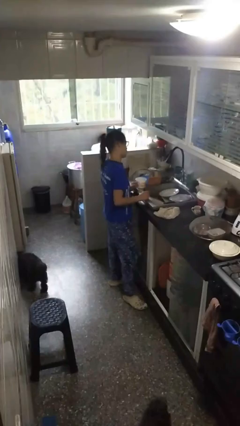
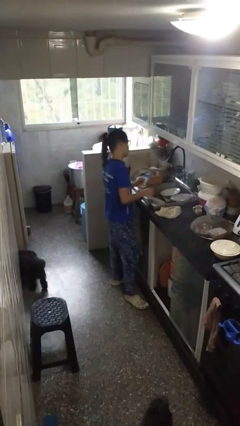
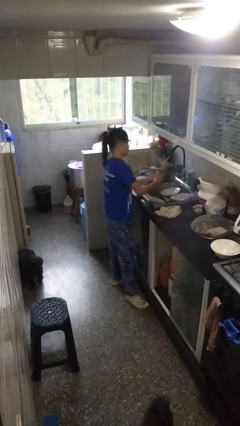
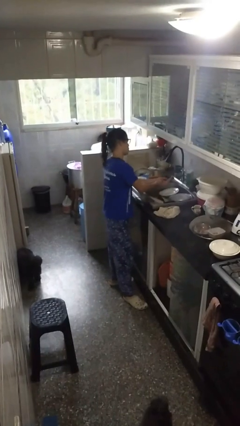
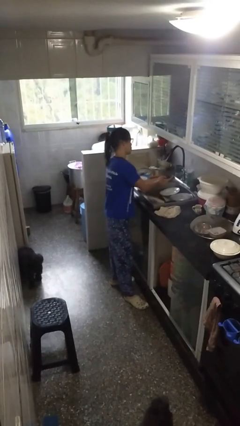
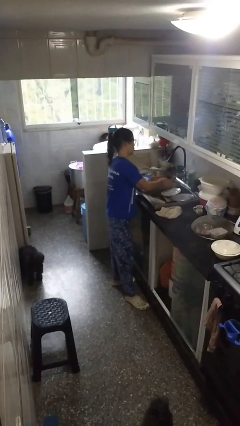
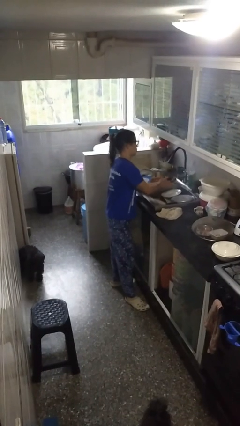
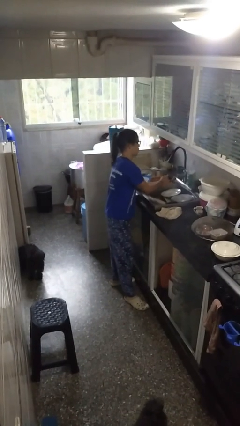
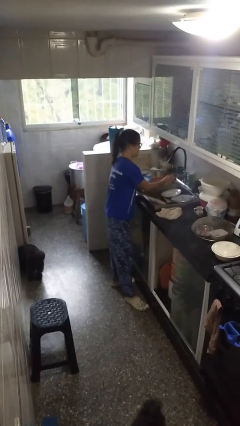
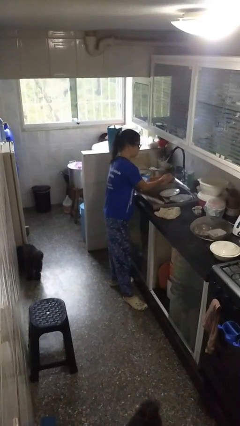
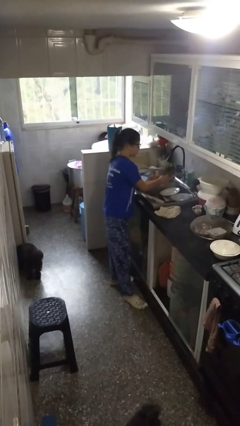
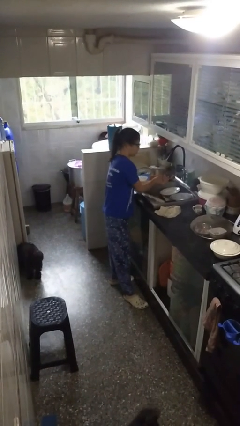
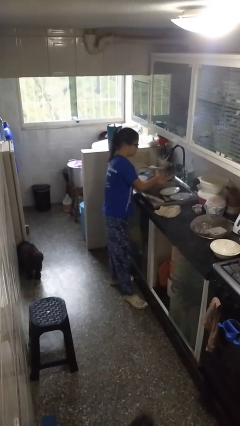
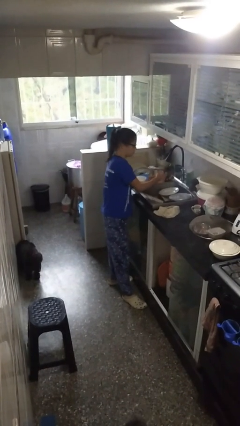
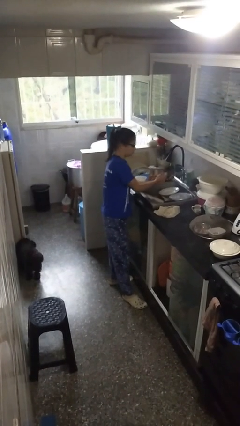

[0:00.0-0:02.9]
person washes hands

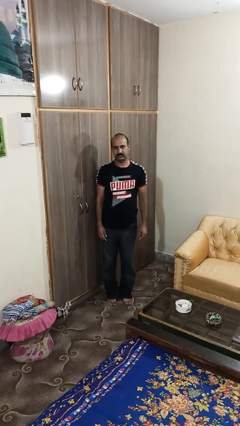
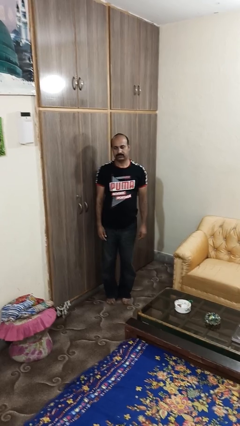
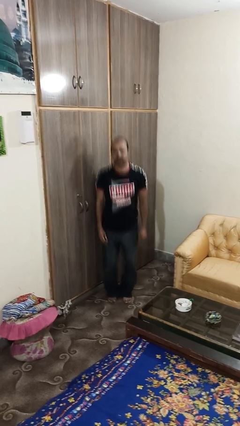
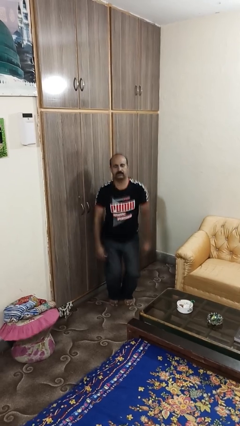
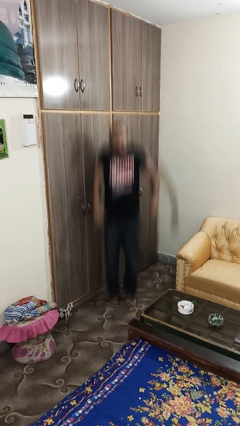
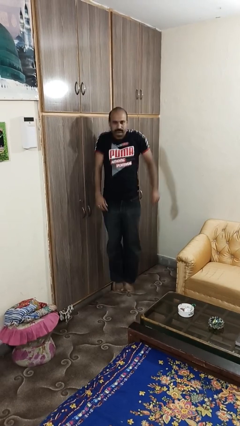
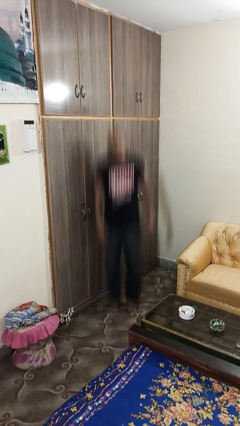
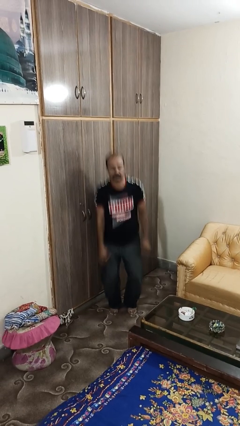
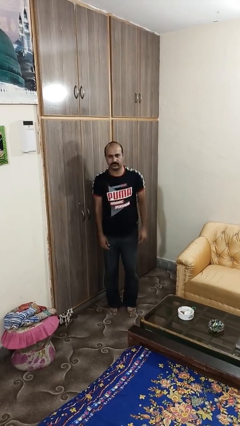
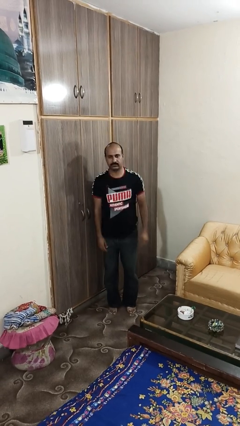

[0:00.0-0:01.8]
person jumps

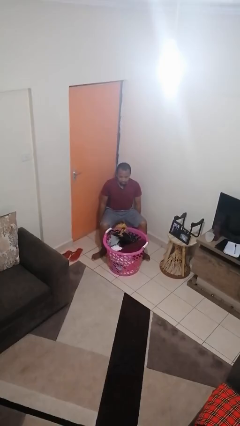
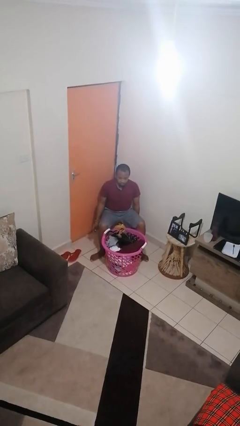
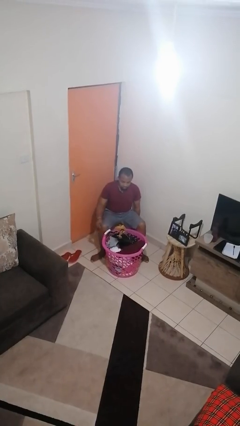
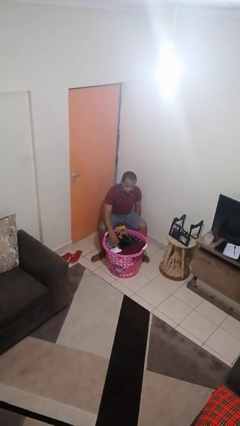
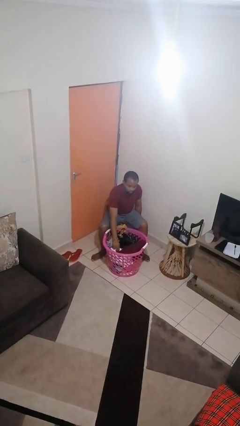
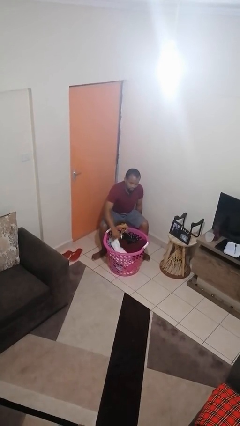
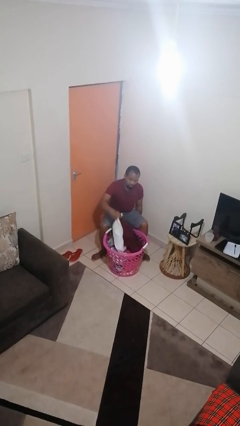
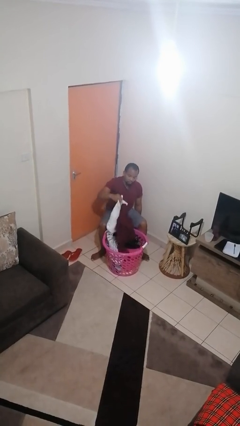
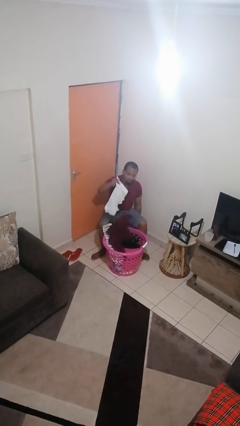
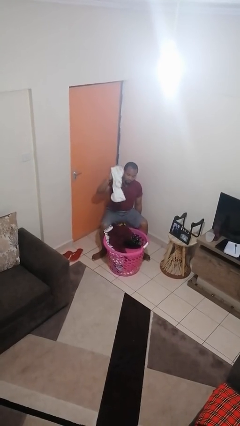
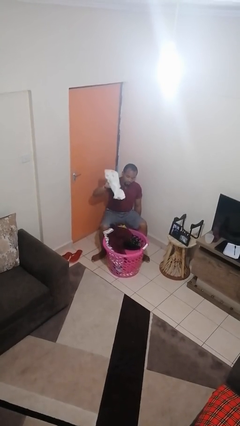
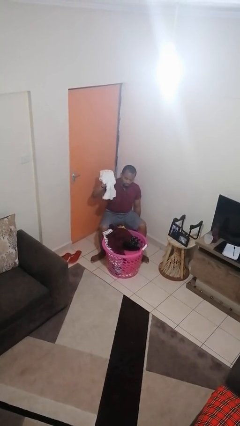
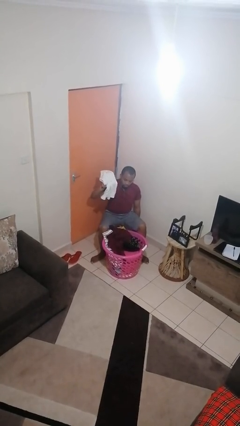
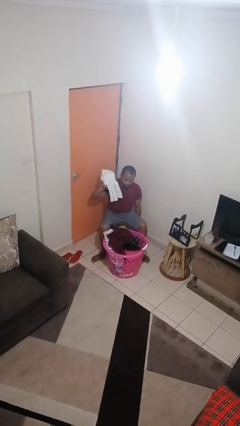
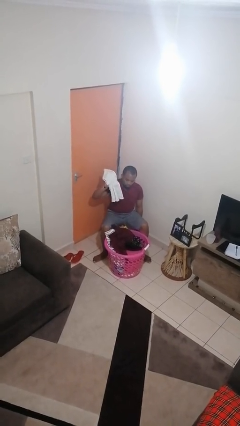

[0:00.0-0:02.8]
person takes object from basket

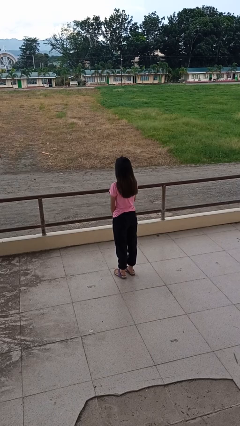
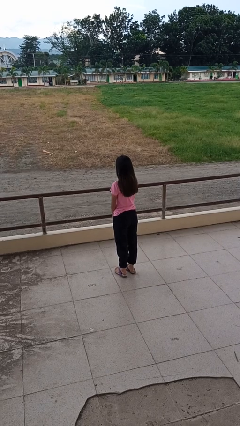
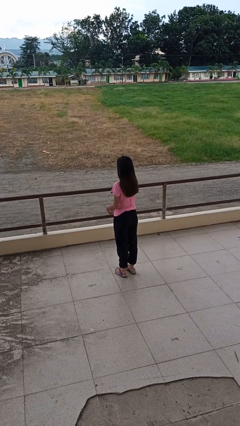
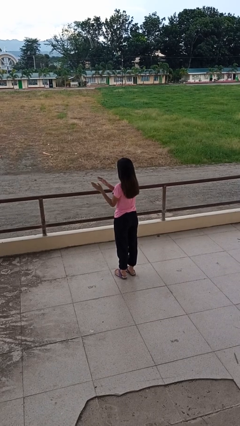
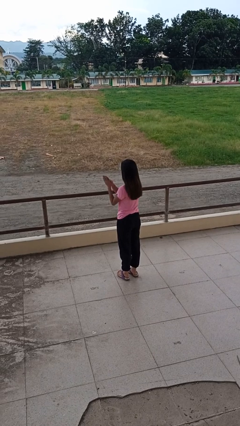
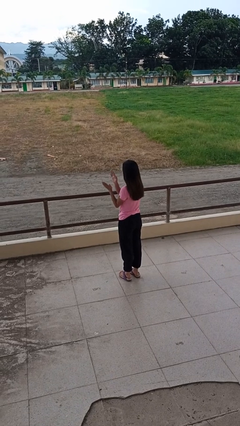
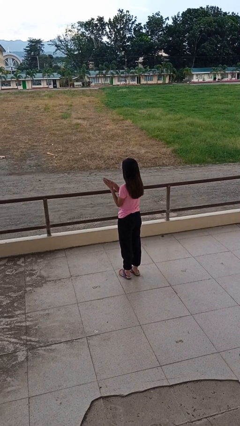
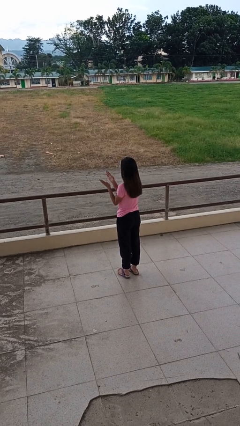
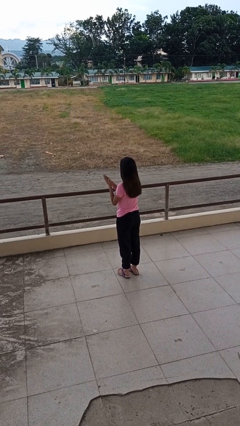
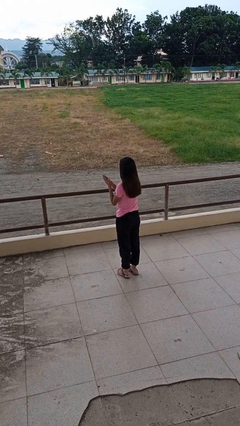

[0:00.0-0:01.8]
person claps hands

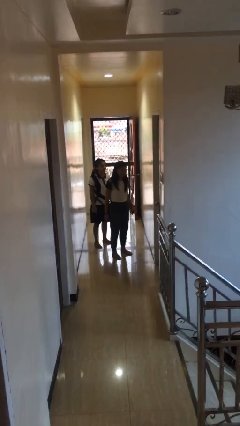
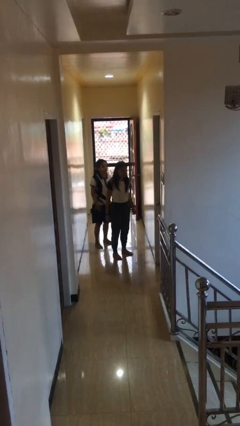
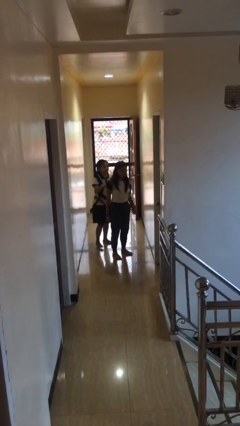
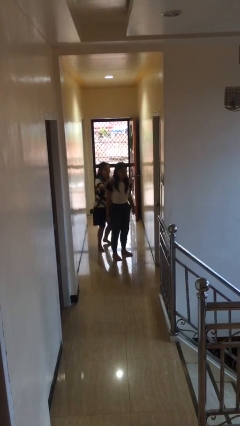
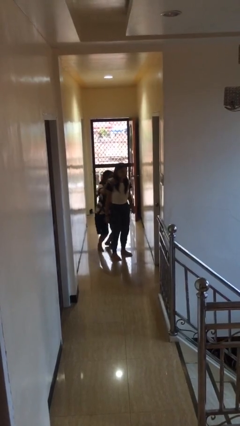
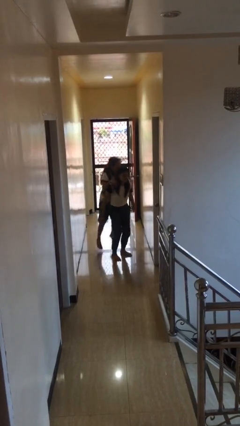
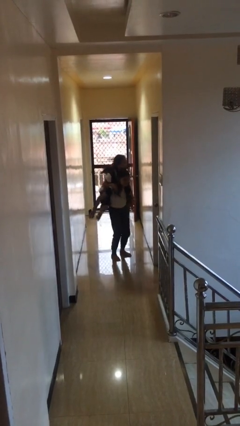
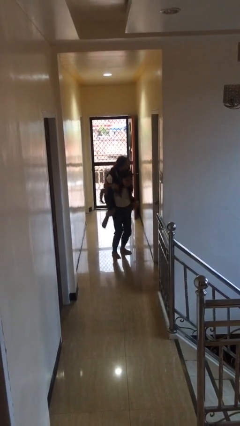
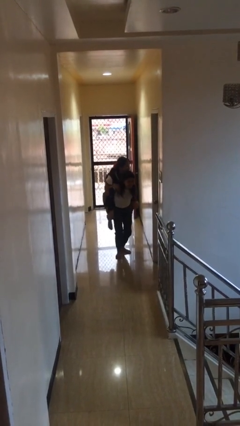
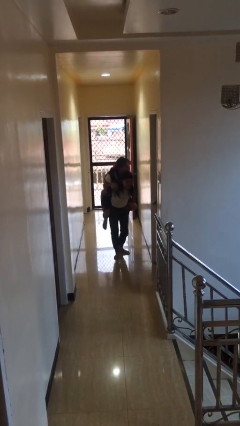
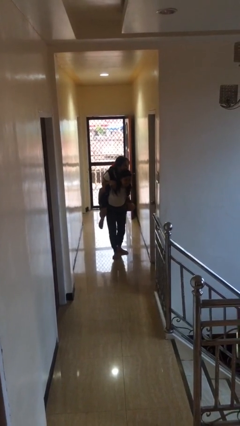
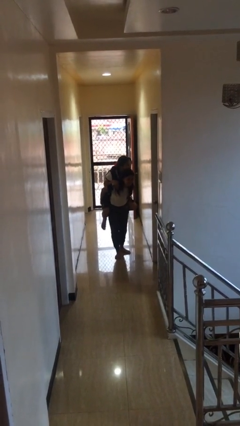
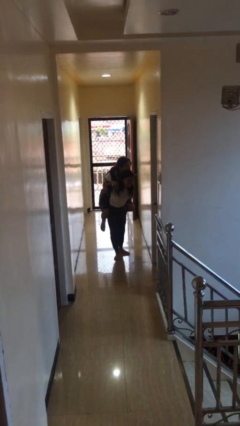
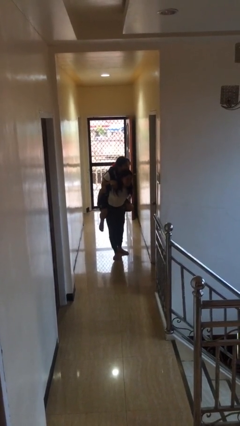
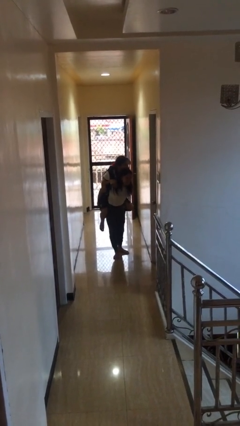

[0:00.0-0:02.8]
person carries person over shoulder

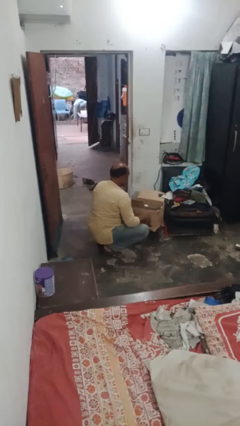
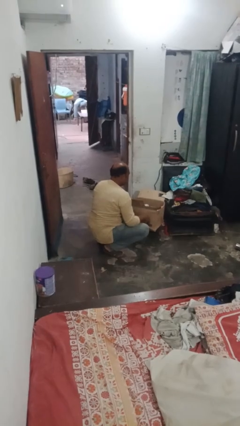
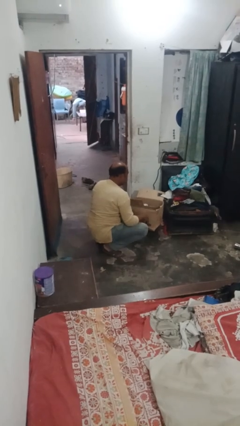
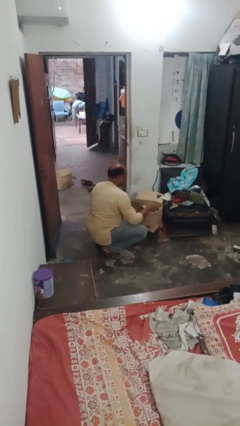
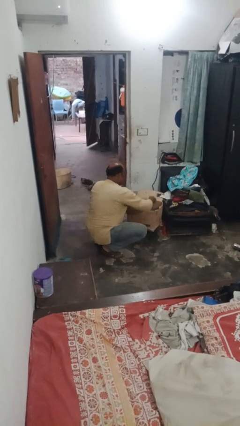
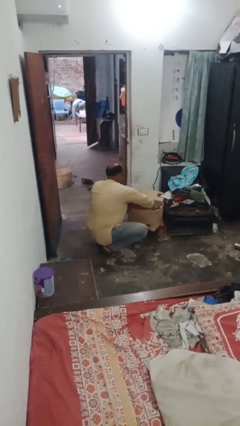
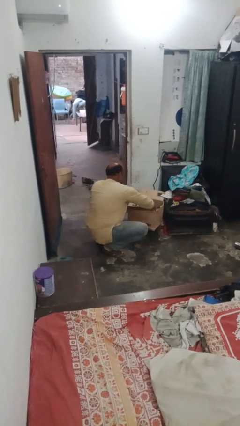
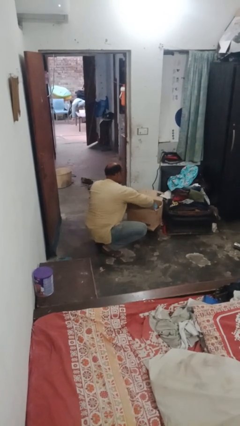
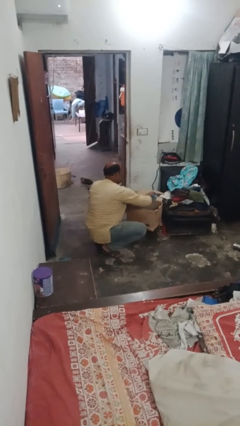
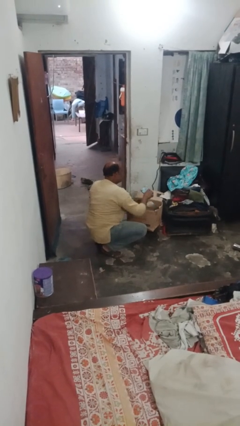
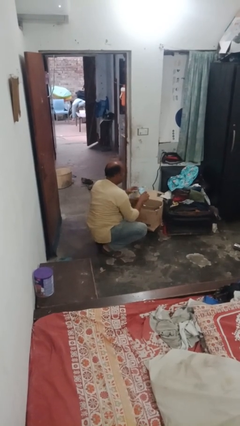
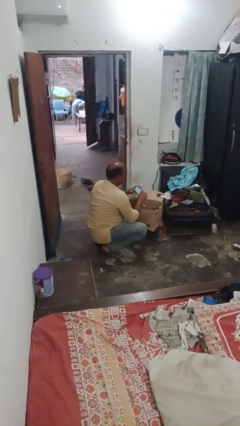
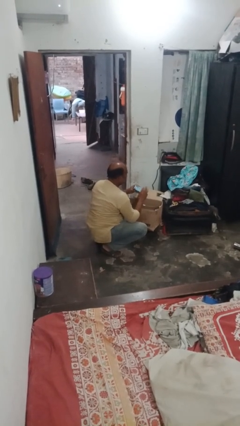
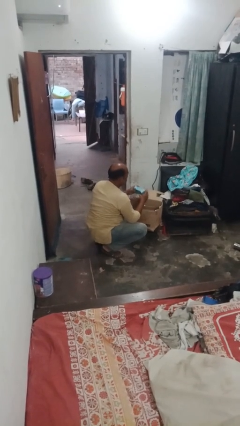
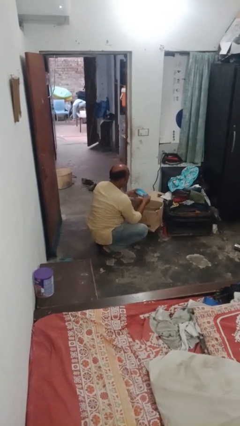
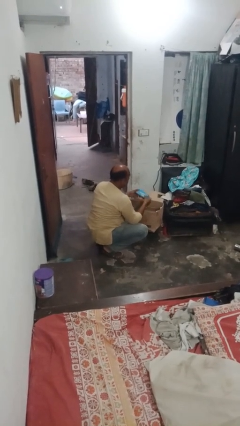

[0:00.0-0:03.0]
person takes object from box

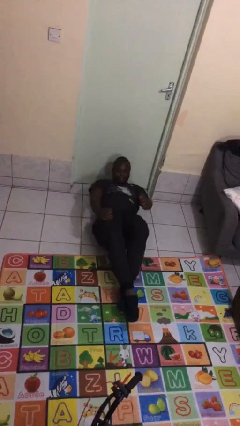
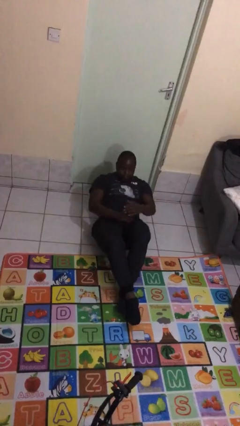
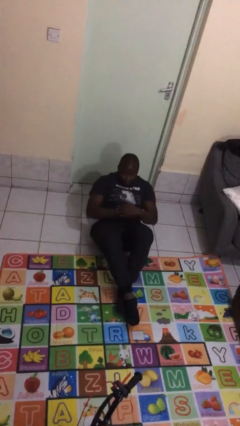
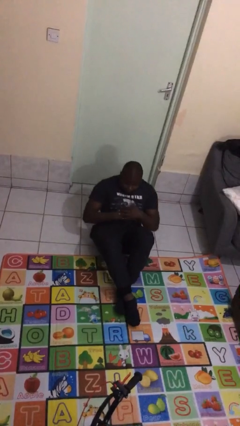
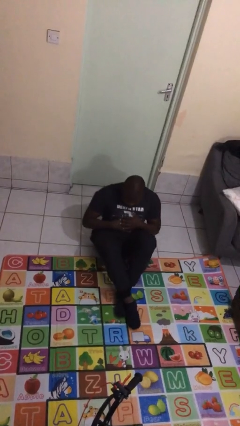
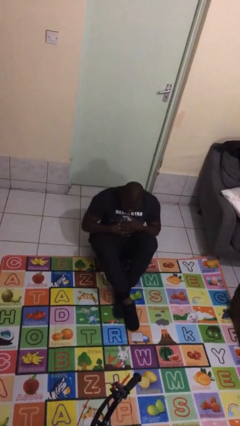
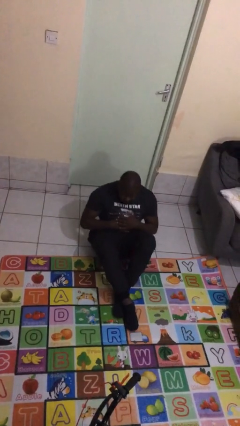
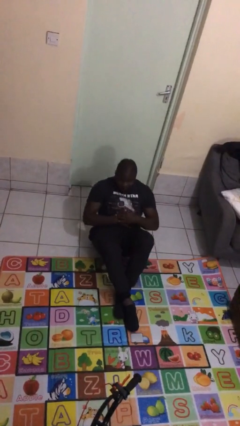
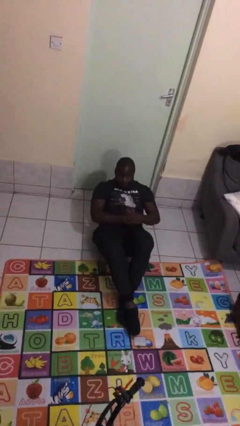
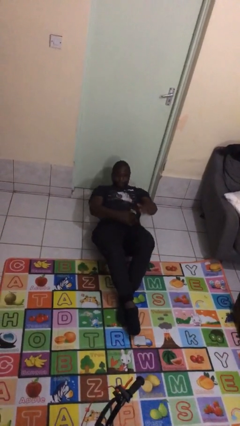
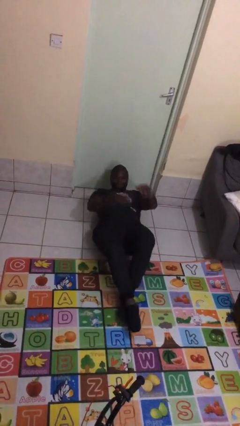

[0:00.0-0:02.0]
person exercises with situp
